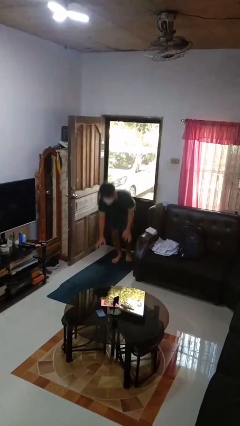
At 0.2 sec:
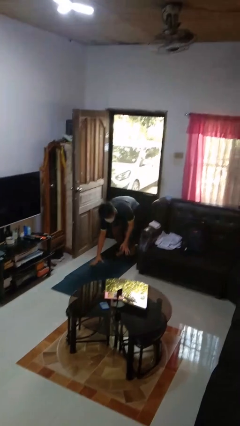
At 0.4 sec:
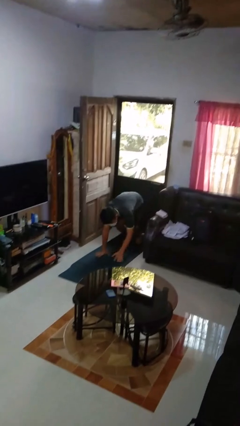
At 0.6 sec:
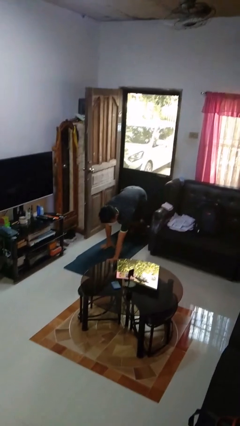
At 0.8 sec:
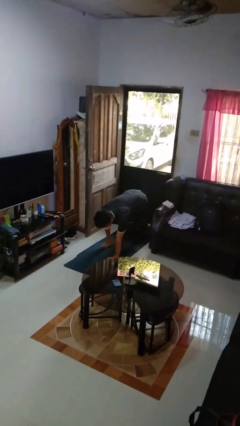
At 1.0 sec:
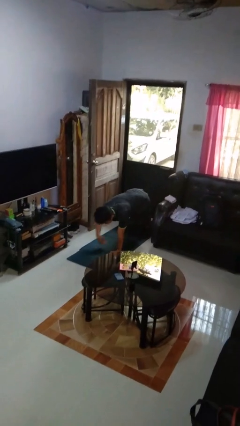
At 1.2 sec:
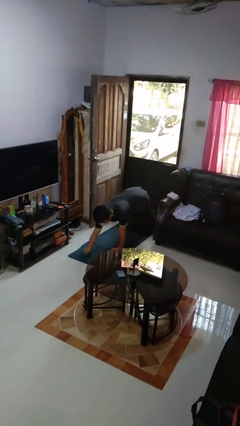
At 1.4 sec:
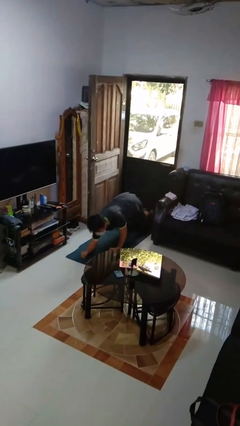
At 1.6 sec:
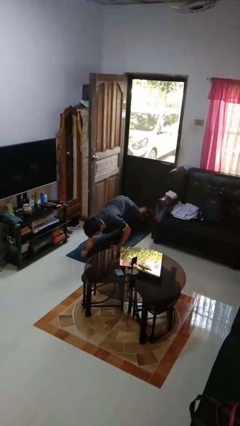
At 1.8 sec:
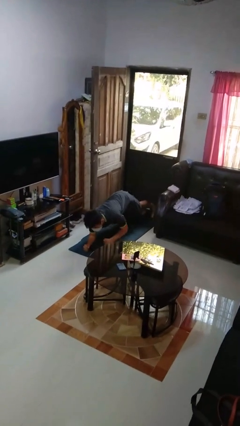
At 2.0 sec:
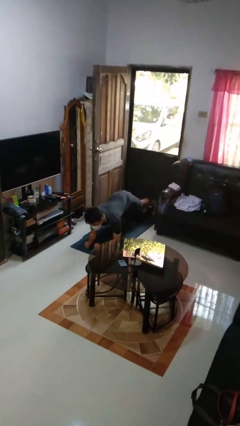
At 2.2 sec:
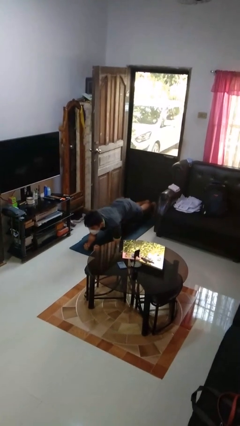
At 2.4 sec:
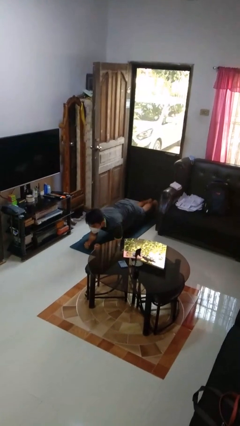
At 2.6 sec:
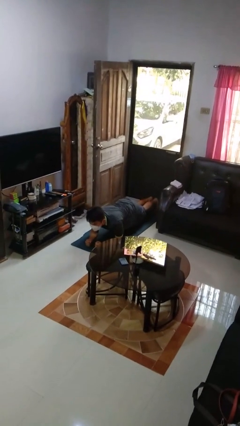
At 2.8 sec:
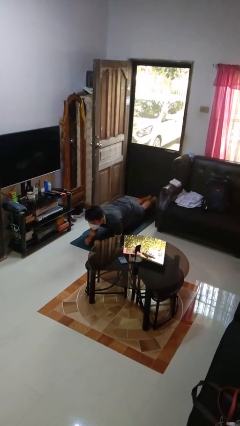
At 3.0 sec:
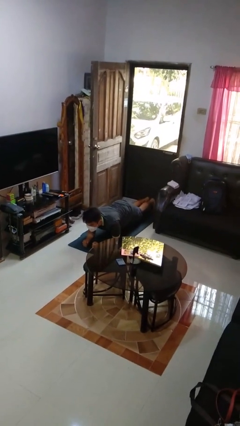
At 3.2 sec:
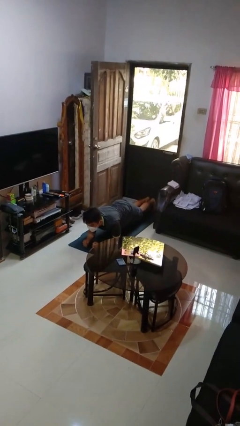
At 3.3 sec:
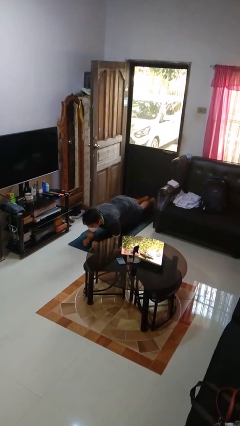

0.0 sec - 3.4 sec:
person exercises with plank

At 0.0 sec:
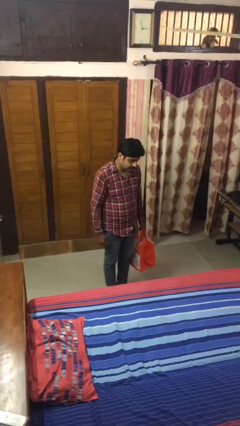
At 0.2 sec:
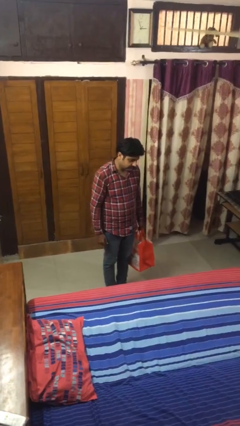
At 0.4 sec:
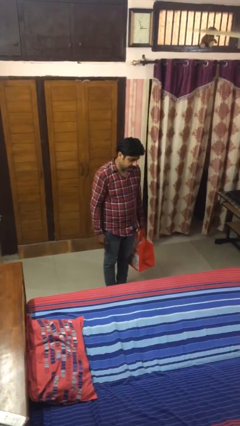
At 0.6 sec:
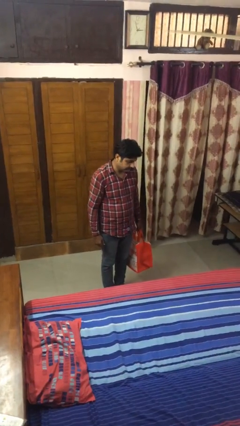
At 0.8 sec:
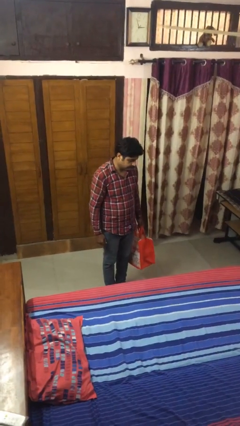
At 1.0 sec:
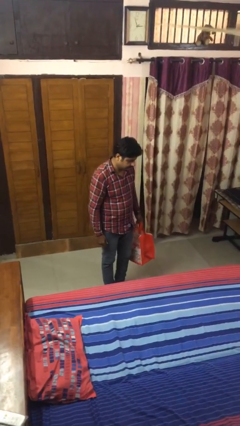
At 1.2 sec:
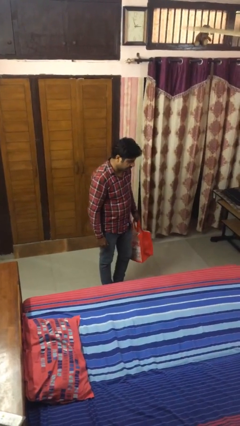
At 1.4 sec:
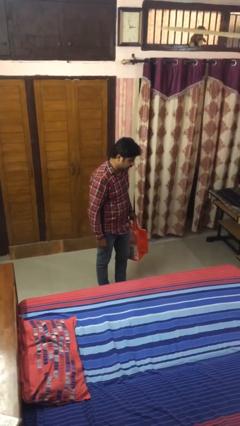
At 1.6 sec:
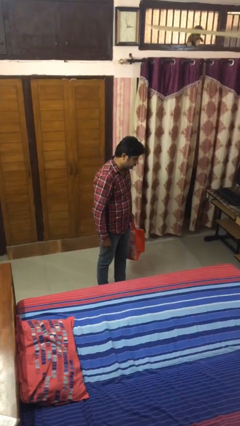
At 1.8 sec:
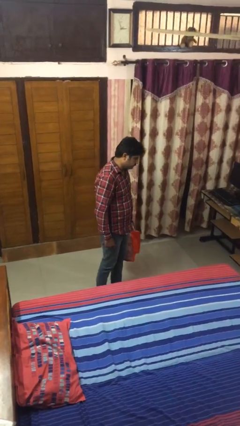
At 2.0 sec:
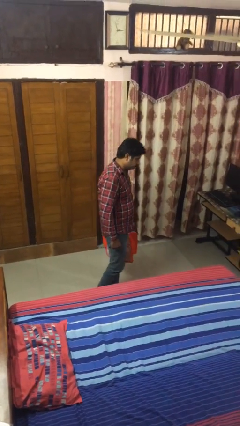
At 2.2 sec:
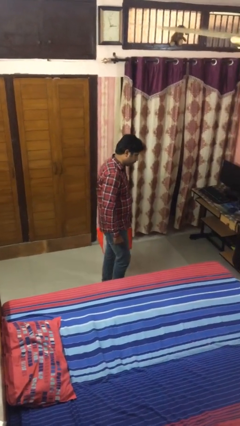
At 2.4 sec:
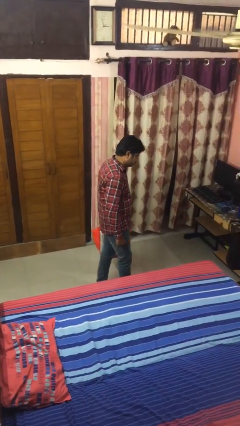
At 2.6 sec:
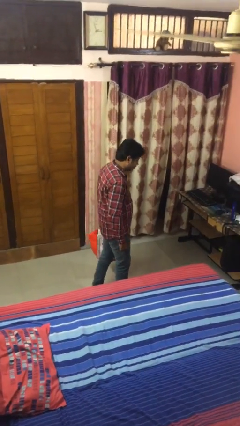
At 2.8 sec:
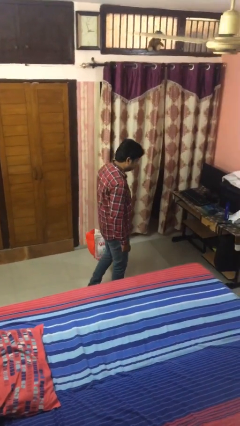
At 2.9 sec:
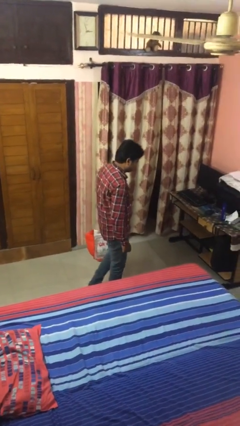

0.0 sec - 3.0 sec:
person carries groceries

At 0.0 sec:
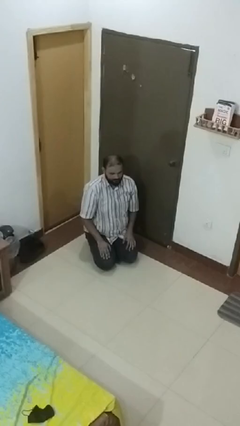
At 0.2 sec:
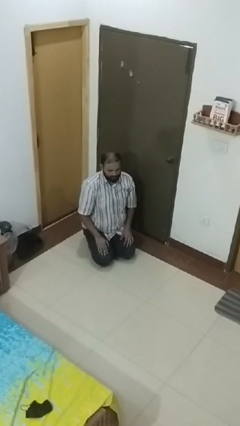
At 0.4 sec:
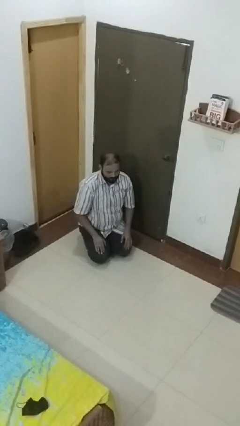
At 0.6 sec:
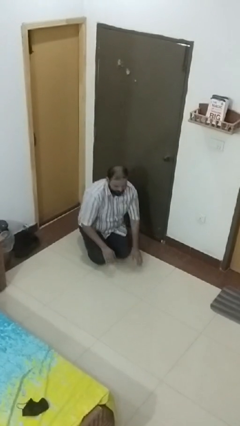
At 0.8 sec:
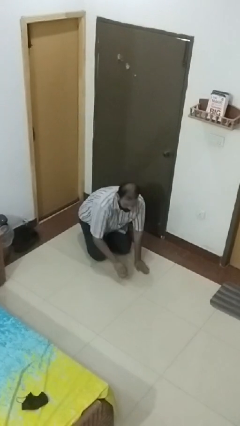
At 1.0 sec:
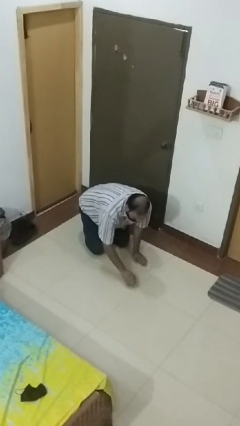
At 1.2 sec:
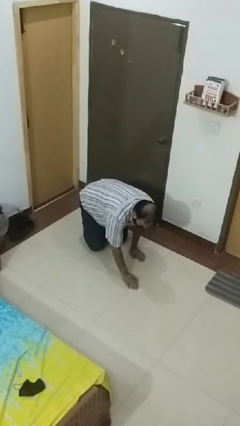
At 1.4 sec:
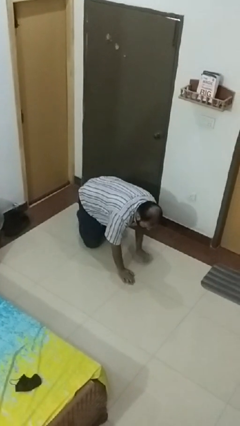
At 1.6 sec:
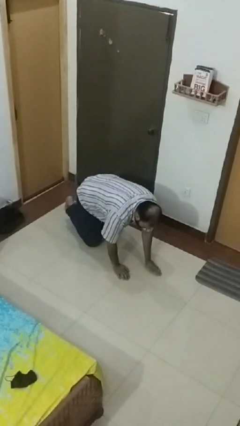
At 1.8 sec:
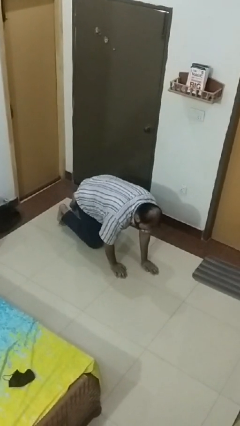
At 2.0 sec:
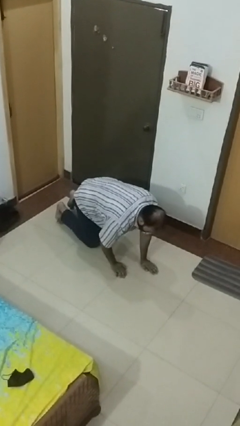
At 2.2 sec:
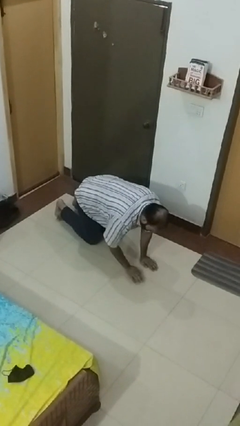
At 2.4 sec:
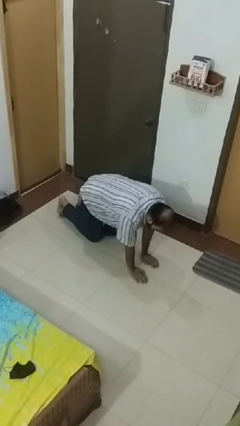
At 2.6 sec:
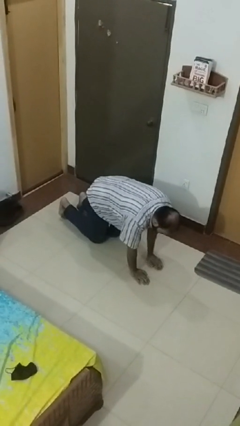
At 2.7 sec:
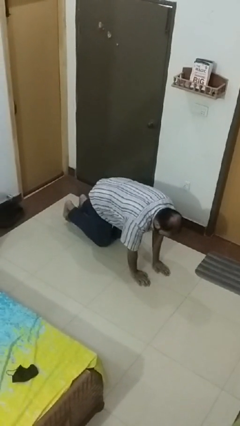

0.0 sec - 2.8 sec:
person crawls

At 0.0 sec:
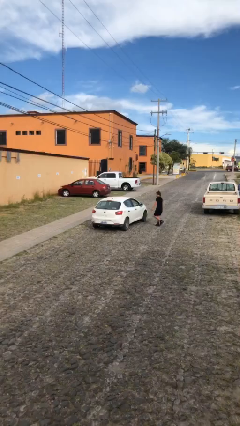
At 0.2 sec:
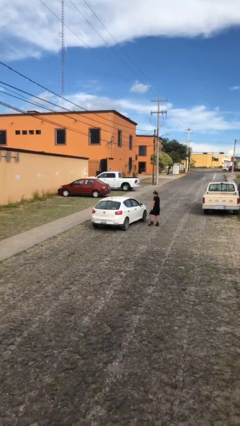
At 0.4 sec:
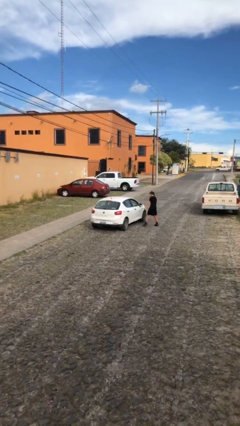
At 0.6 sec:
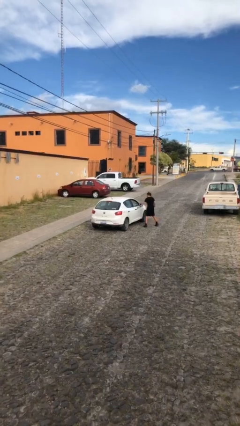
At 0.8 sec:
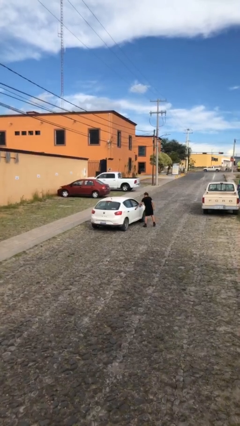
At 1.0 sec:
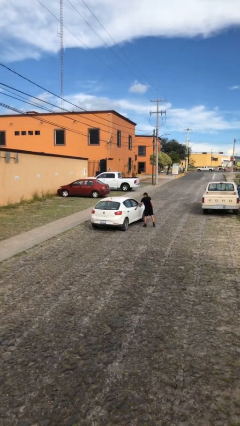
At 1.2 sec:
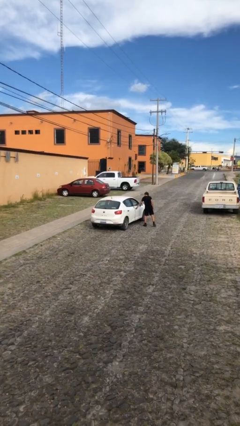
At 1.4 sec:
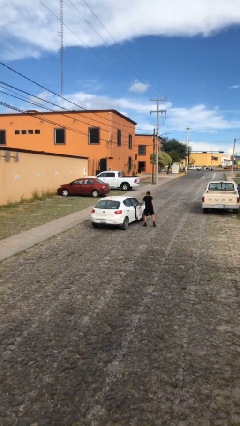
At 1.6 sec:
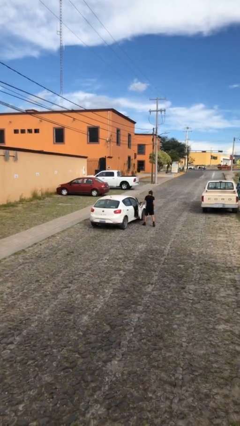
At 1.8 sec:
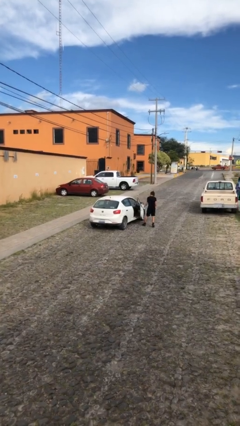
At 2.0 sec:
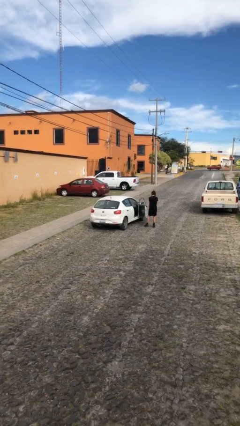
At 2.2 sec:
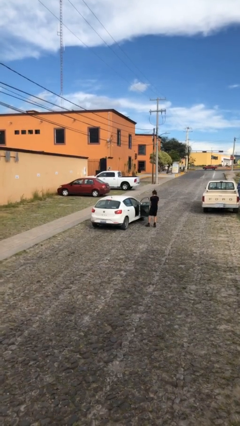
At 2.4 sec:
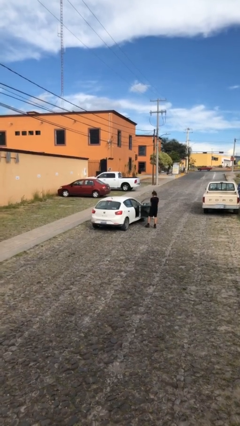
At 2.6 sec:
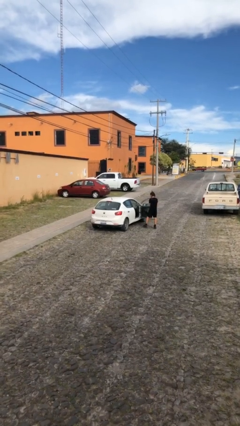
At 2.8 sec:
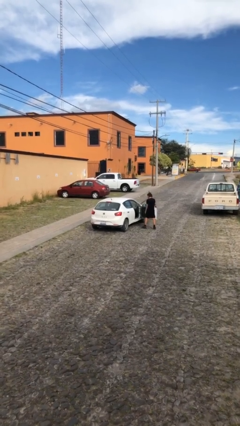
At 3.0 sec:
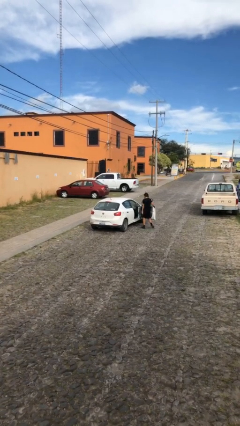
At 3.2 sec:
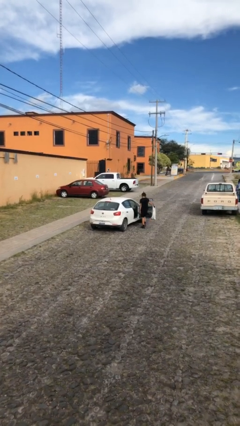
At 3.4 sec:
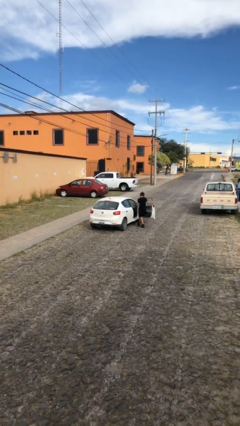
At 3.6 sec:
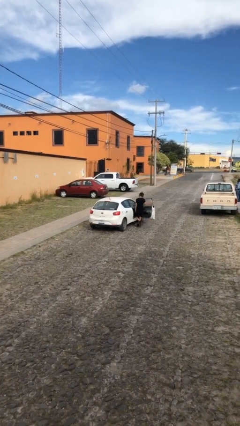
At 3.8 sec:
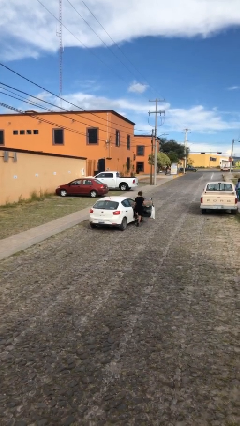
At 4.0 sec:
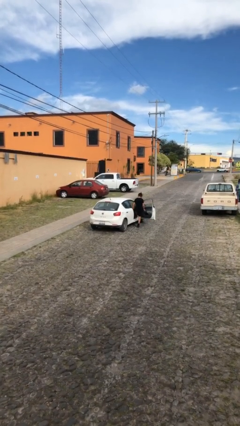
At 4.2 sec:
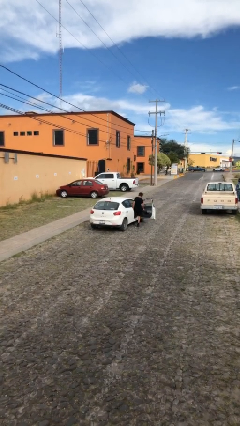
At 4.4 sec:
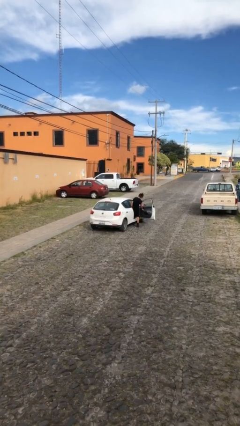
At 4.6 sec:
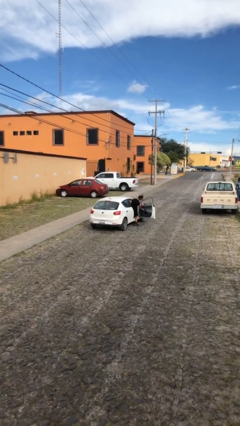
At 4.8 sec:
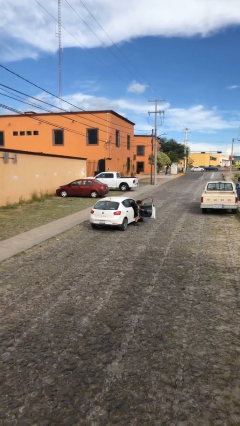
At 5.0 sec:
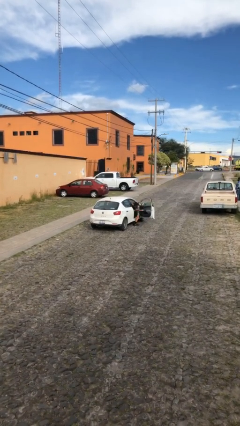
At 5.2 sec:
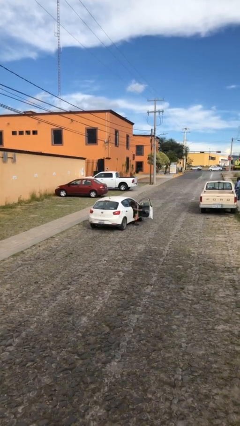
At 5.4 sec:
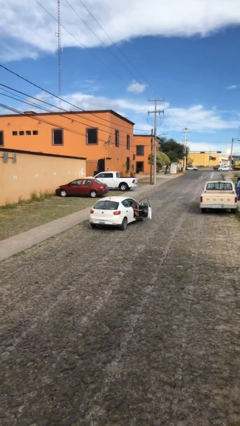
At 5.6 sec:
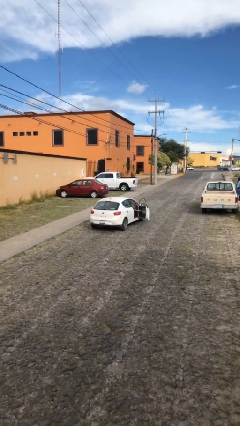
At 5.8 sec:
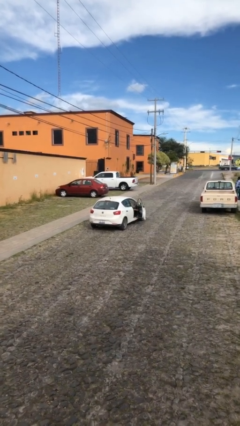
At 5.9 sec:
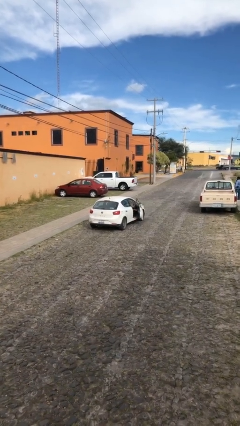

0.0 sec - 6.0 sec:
car picks up person

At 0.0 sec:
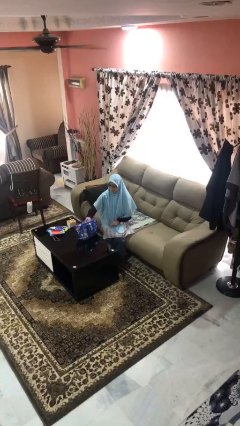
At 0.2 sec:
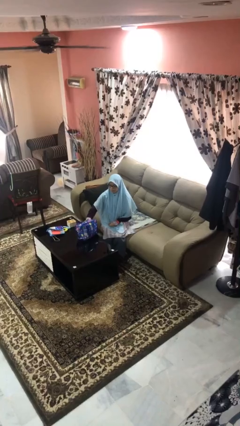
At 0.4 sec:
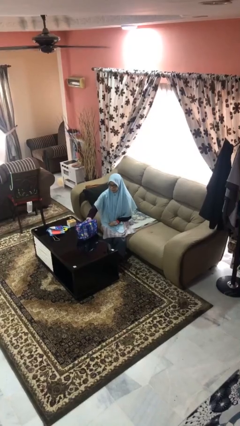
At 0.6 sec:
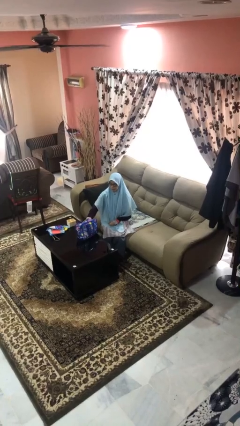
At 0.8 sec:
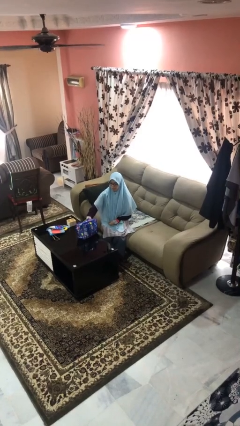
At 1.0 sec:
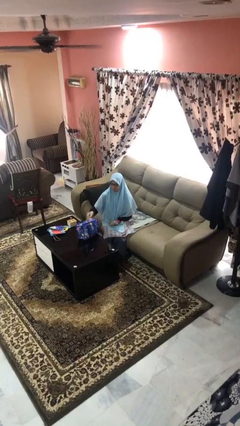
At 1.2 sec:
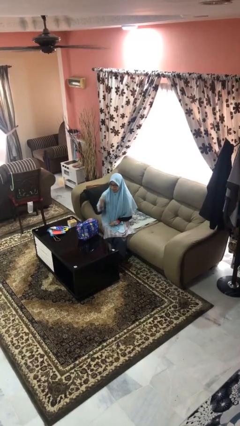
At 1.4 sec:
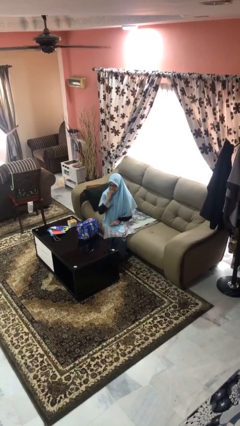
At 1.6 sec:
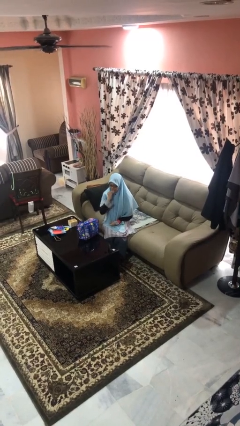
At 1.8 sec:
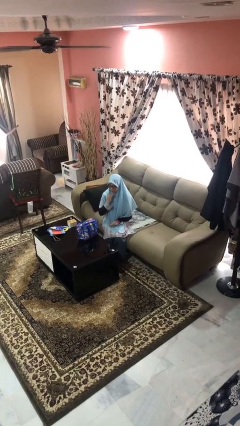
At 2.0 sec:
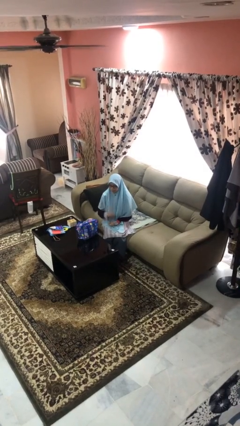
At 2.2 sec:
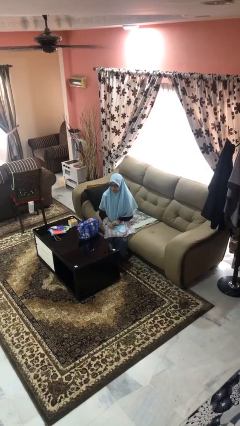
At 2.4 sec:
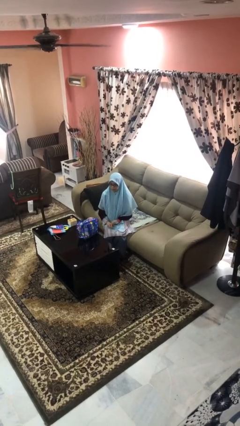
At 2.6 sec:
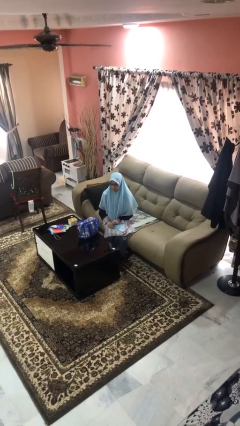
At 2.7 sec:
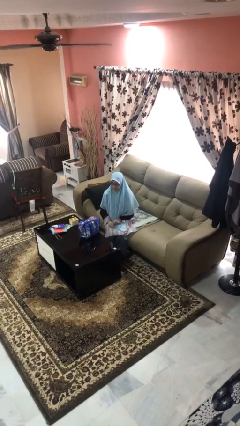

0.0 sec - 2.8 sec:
person eats snack from bag
